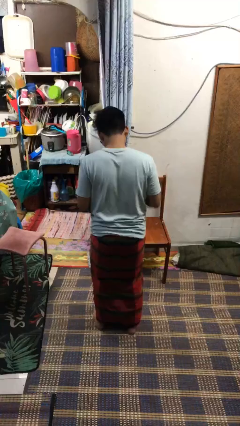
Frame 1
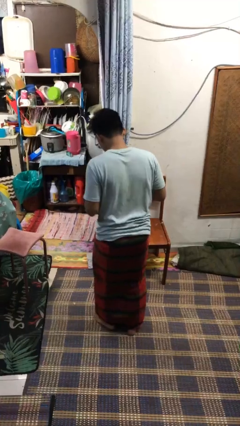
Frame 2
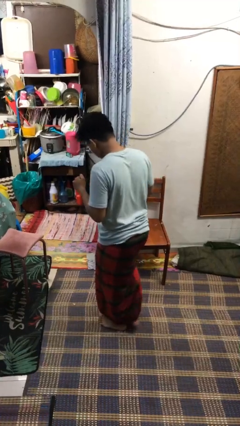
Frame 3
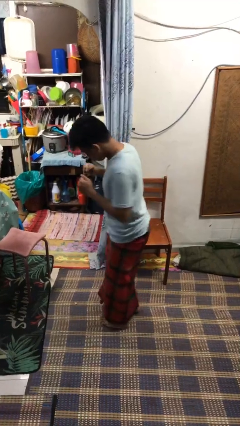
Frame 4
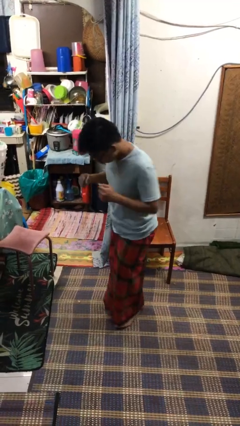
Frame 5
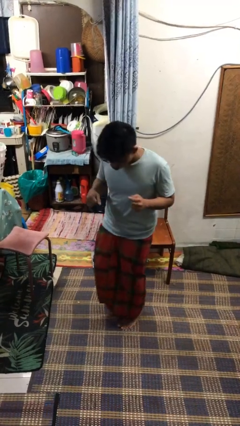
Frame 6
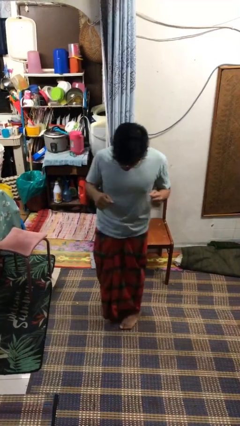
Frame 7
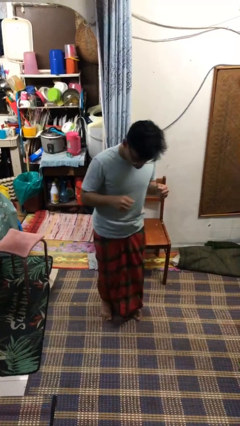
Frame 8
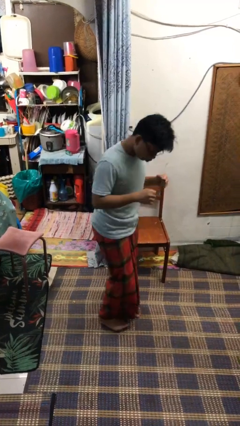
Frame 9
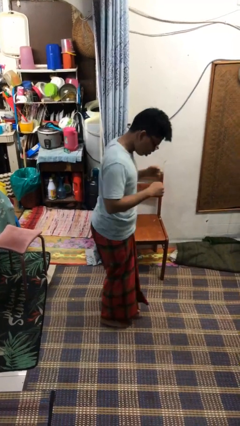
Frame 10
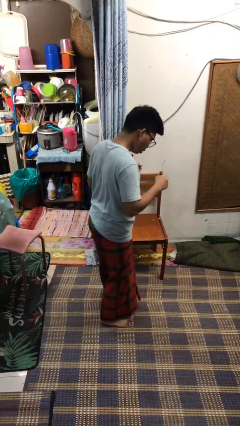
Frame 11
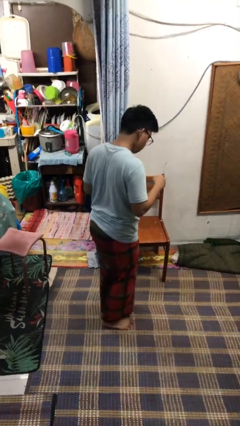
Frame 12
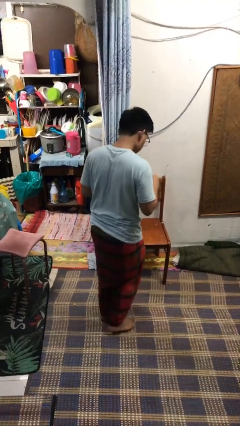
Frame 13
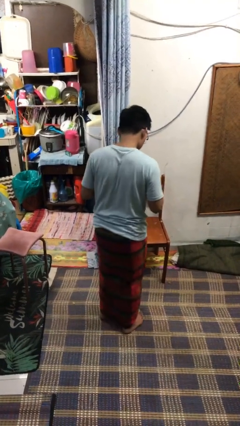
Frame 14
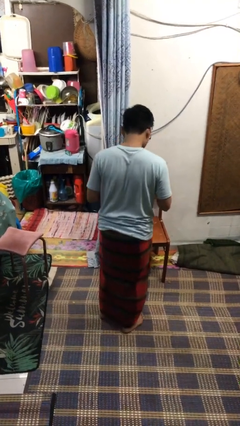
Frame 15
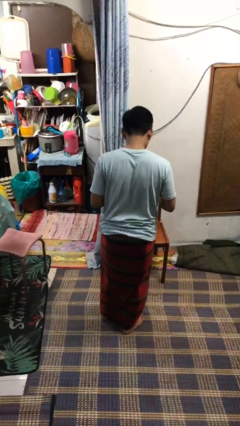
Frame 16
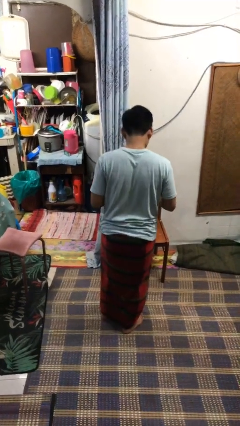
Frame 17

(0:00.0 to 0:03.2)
person twirls

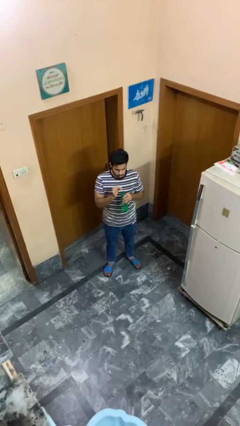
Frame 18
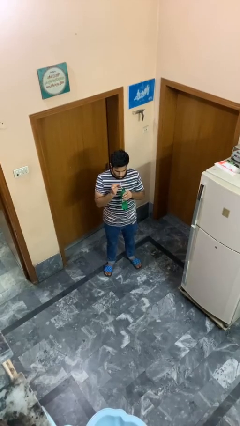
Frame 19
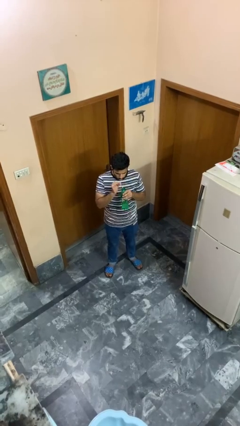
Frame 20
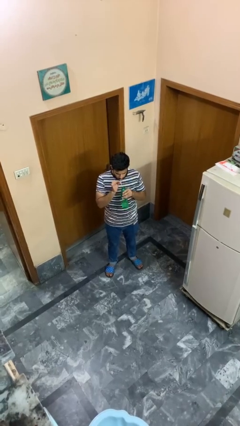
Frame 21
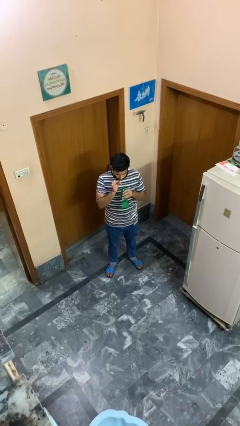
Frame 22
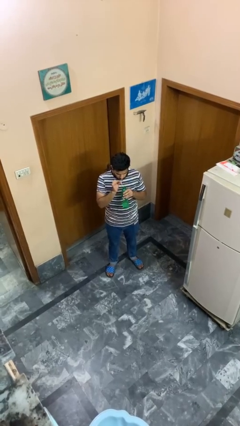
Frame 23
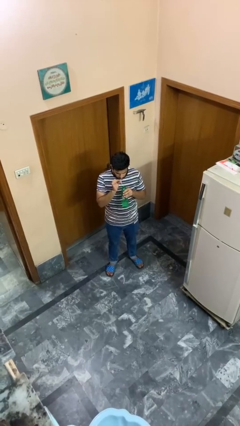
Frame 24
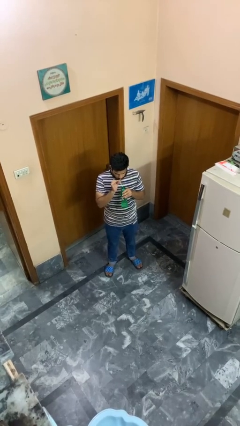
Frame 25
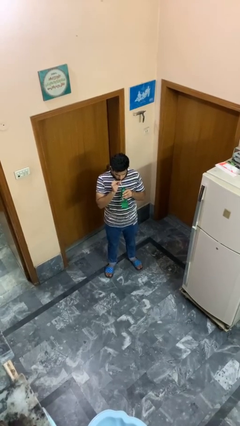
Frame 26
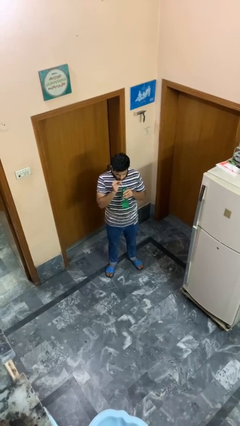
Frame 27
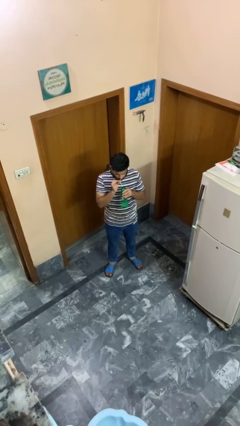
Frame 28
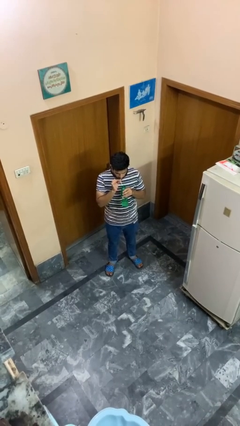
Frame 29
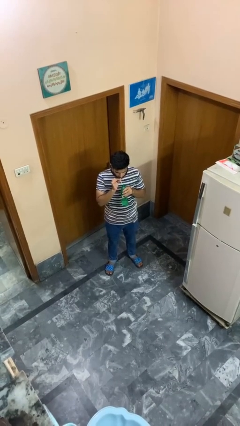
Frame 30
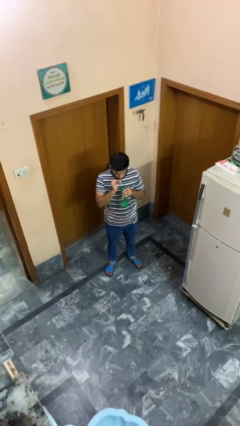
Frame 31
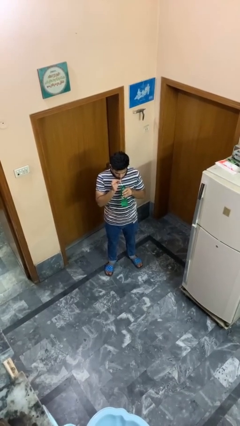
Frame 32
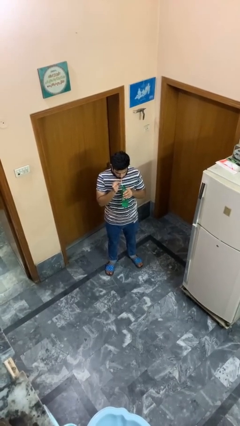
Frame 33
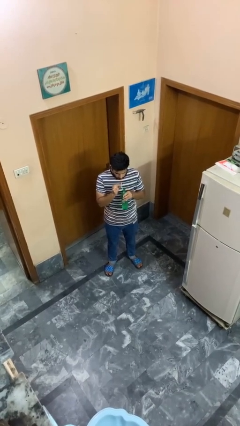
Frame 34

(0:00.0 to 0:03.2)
person drinks from straw

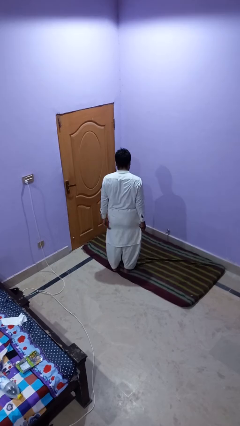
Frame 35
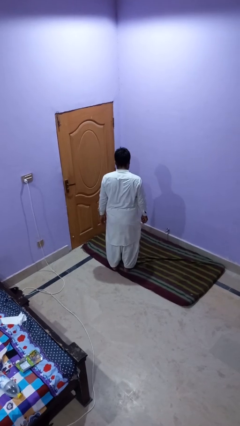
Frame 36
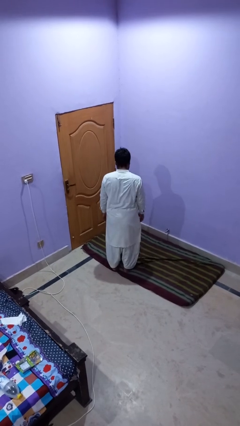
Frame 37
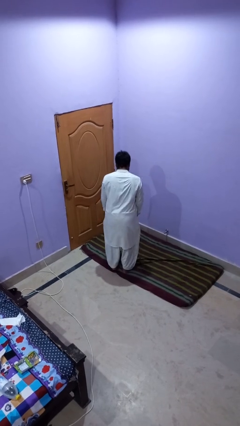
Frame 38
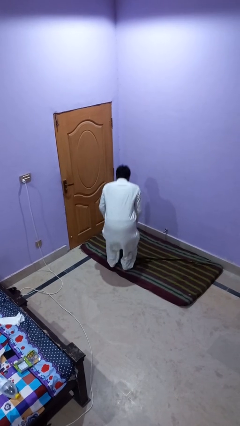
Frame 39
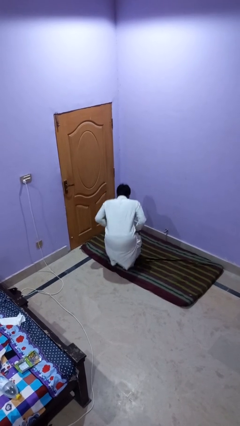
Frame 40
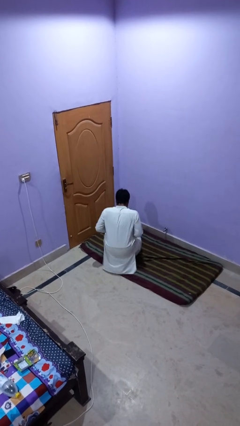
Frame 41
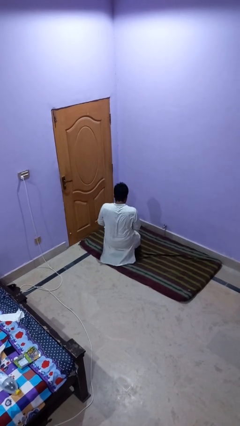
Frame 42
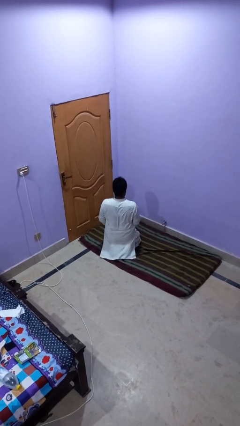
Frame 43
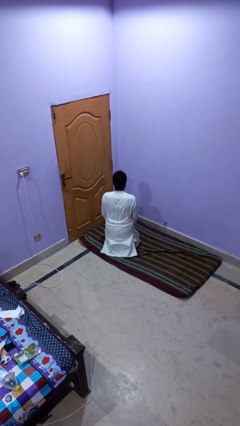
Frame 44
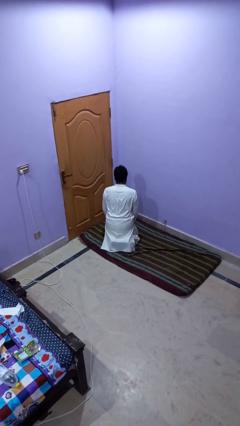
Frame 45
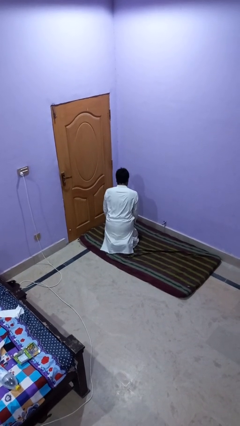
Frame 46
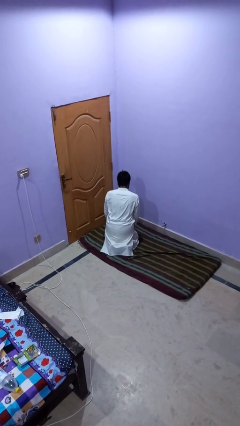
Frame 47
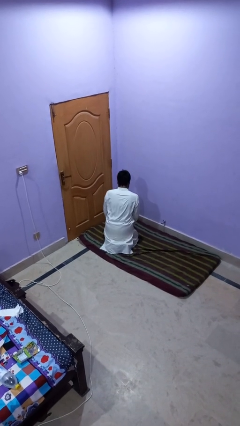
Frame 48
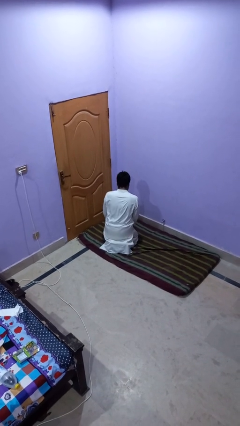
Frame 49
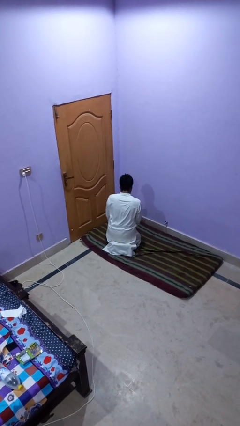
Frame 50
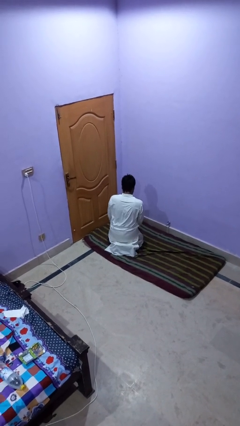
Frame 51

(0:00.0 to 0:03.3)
person kneels

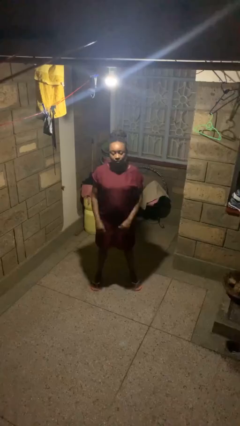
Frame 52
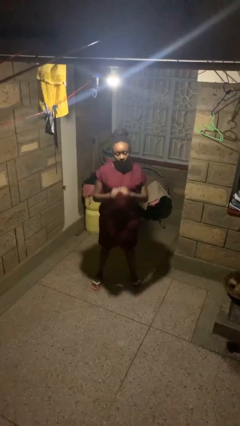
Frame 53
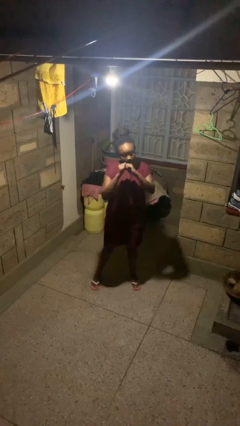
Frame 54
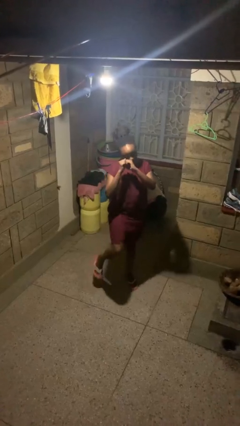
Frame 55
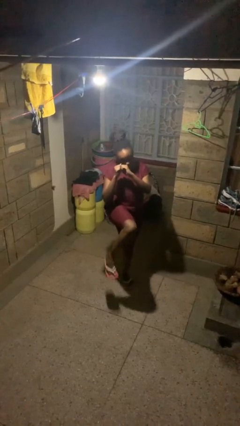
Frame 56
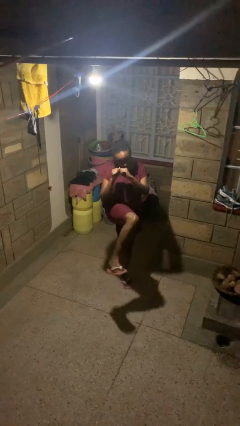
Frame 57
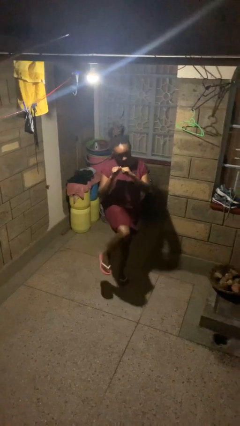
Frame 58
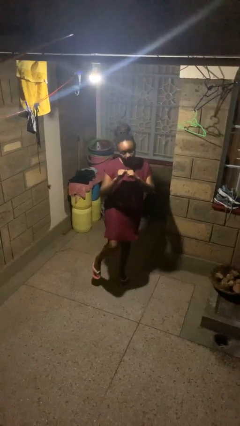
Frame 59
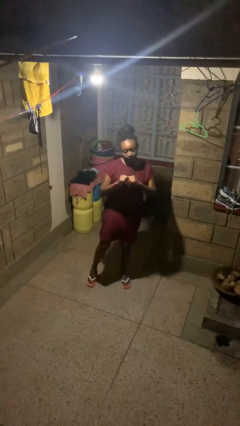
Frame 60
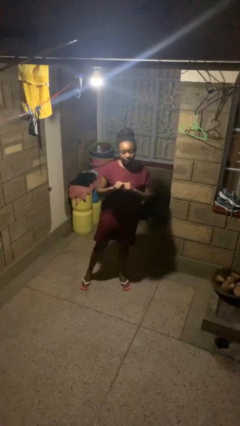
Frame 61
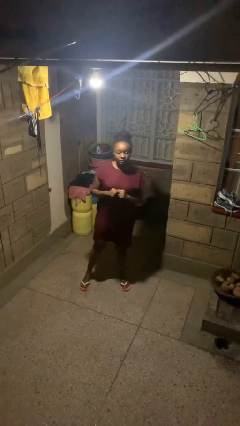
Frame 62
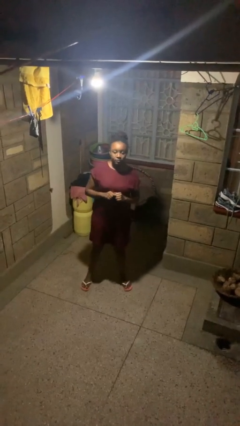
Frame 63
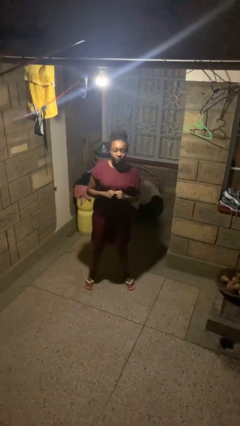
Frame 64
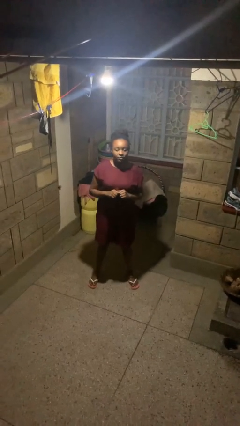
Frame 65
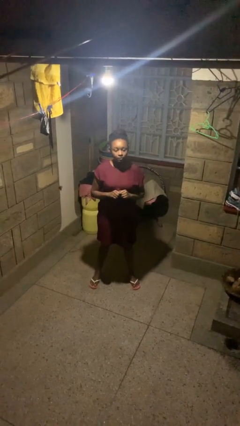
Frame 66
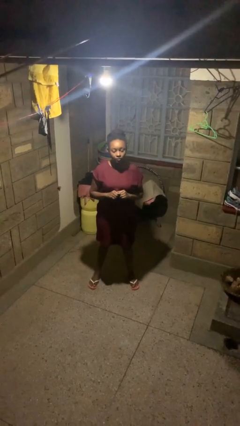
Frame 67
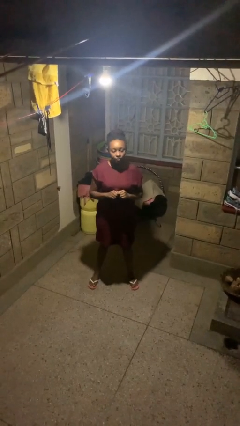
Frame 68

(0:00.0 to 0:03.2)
person karate kicks

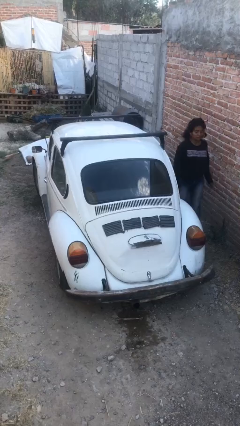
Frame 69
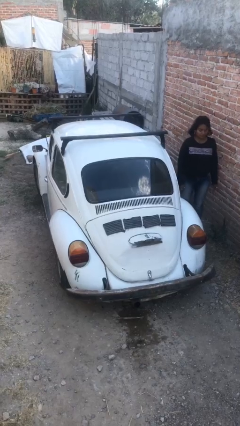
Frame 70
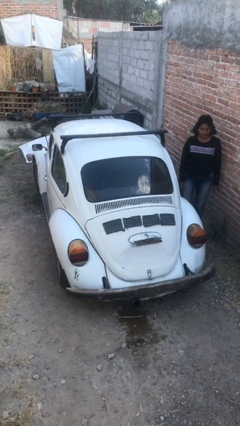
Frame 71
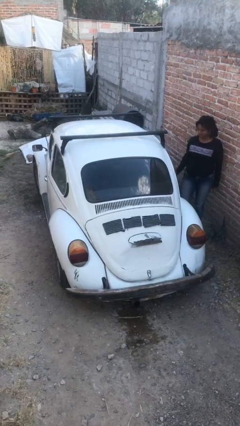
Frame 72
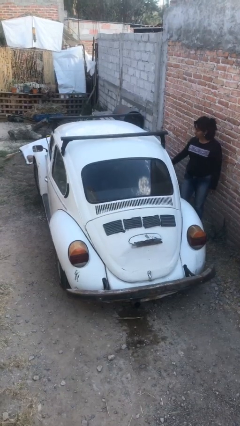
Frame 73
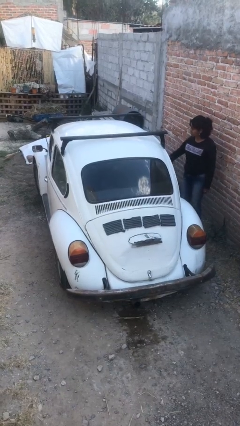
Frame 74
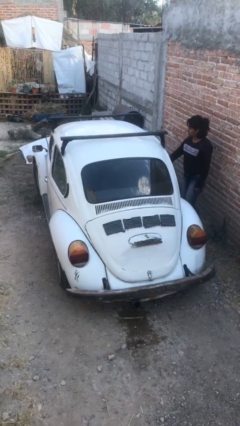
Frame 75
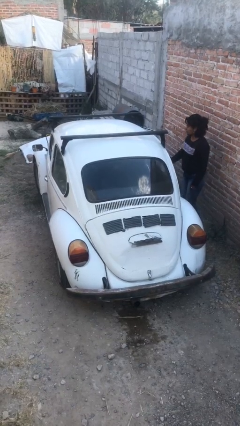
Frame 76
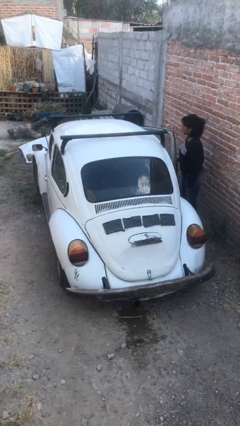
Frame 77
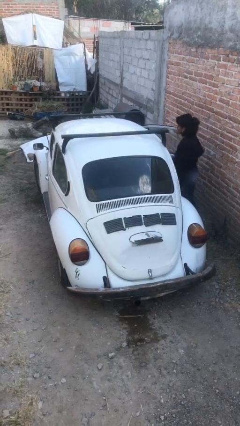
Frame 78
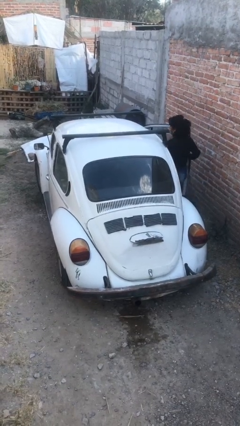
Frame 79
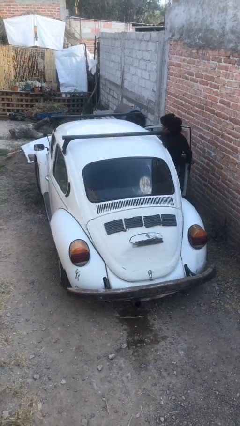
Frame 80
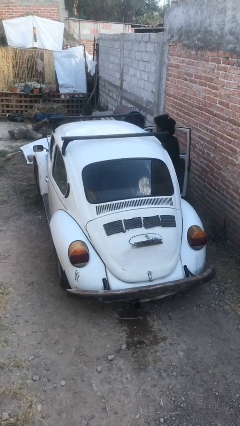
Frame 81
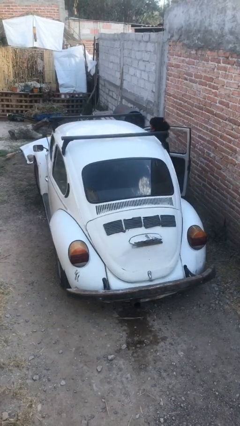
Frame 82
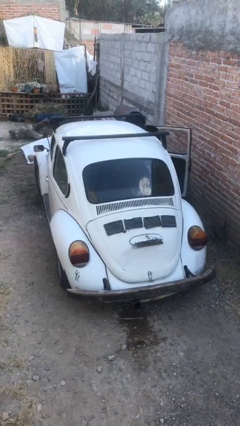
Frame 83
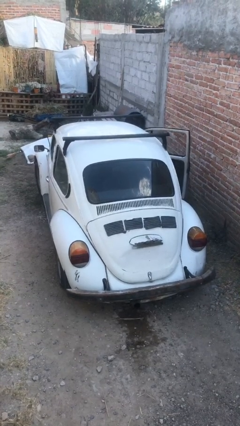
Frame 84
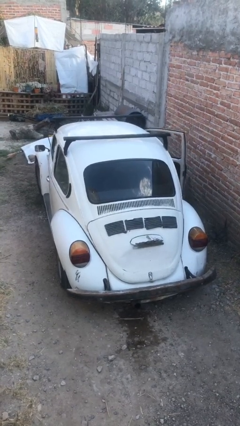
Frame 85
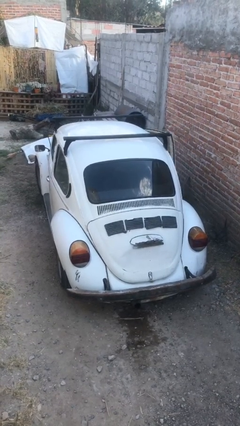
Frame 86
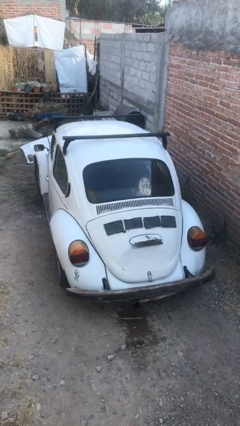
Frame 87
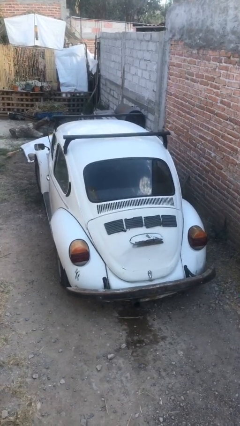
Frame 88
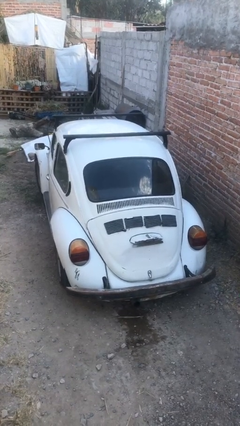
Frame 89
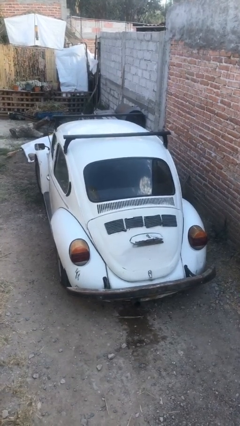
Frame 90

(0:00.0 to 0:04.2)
car picks up person

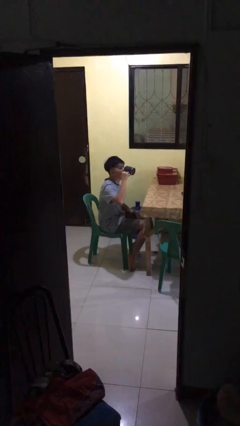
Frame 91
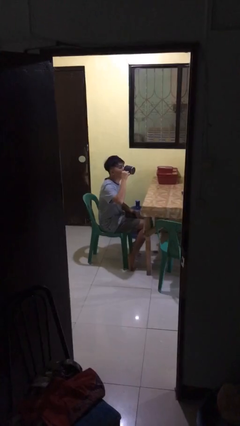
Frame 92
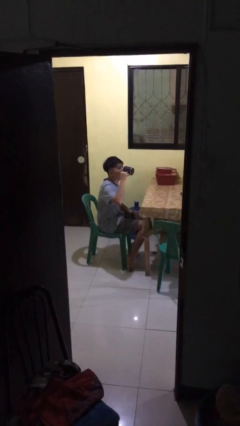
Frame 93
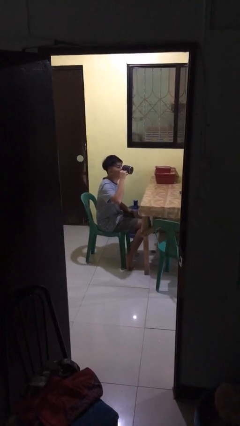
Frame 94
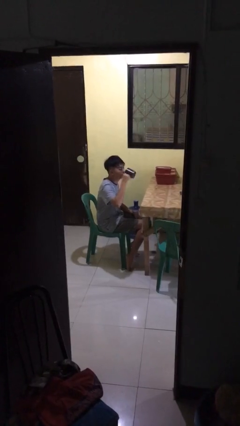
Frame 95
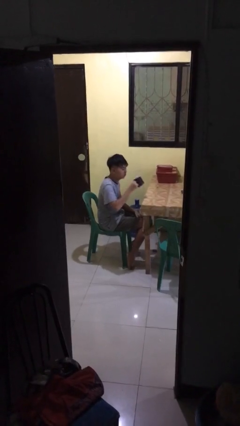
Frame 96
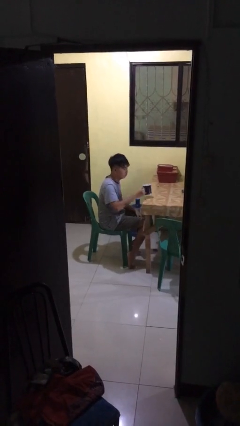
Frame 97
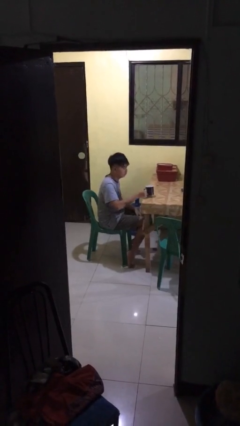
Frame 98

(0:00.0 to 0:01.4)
person puts down object on table
